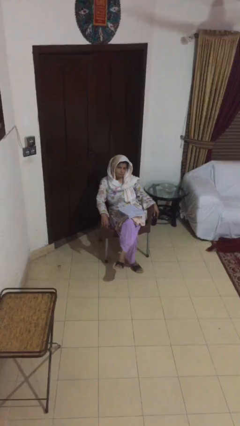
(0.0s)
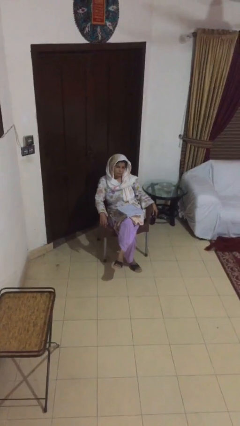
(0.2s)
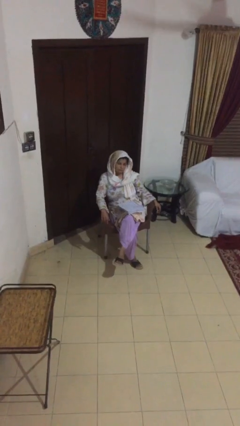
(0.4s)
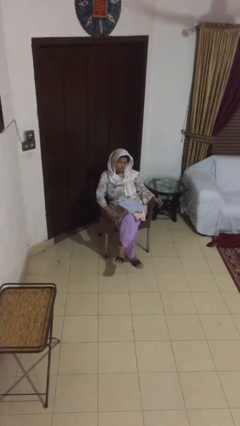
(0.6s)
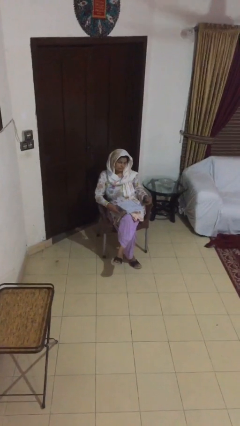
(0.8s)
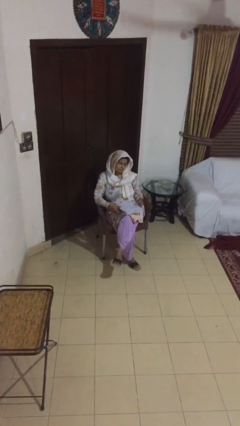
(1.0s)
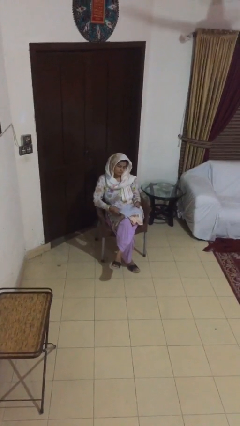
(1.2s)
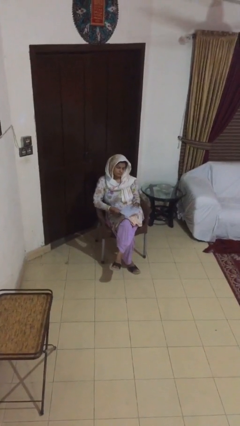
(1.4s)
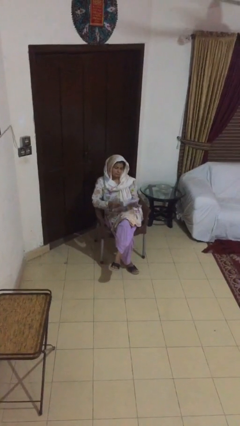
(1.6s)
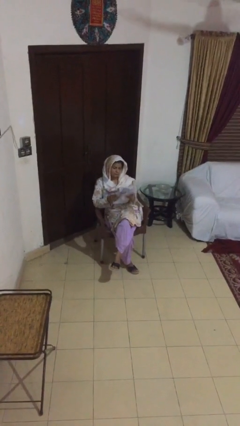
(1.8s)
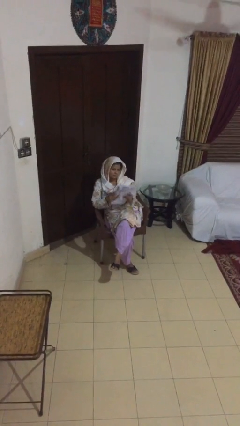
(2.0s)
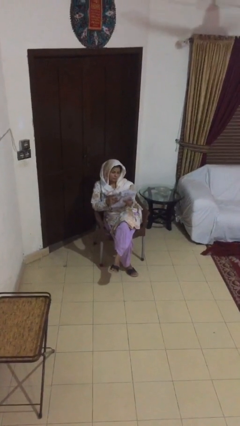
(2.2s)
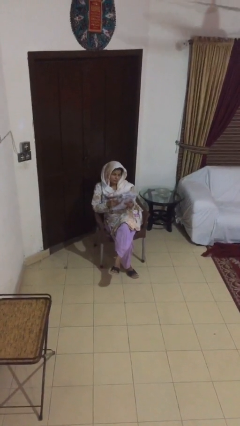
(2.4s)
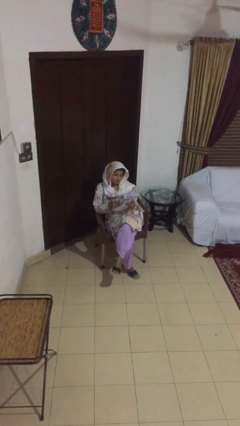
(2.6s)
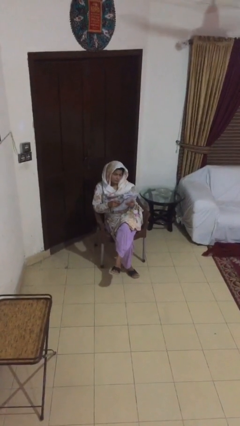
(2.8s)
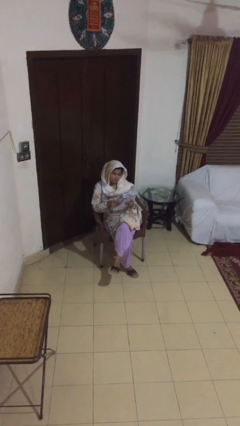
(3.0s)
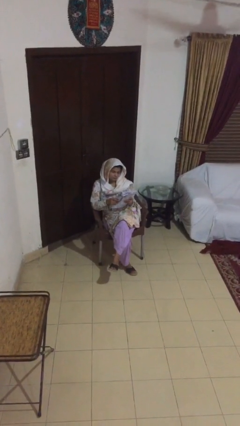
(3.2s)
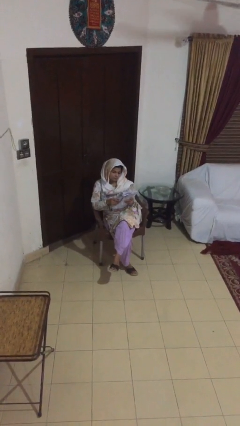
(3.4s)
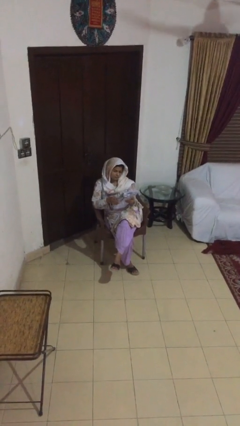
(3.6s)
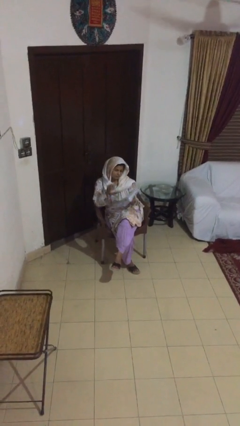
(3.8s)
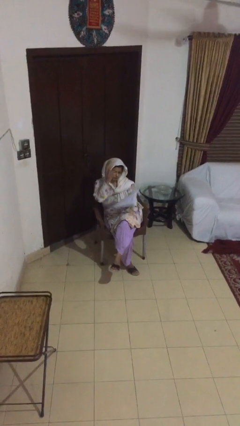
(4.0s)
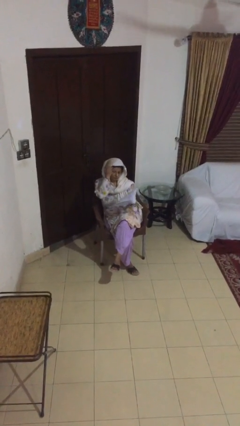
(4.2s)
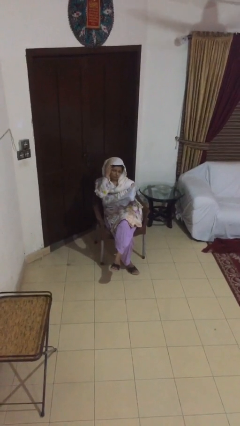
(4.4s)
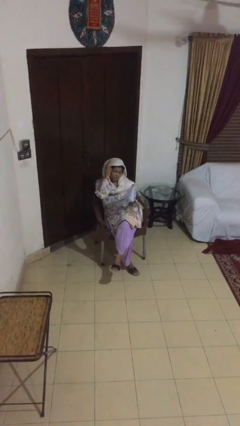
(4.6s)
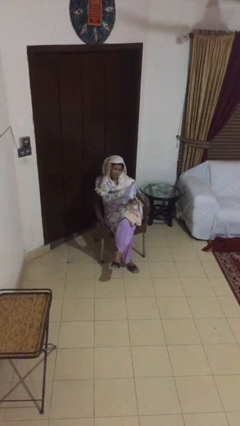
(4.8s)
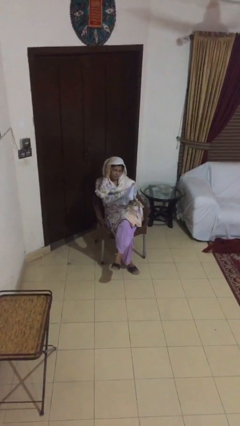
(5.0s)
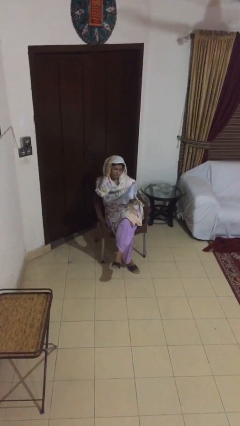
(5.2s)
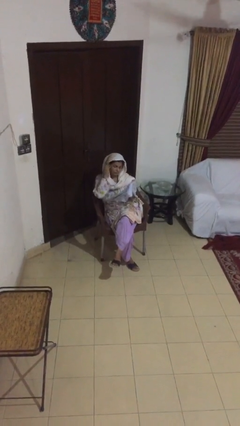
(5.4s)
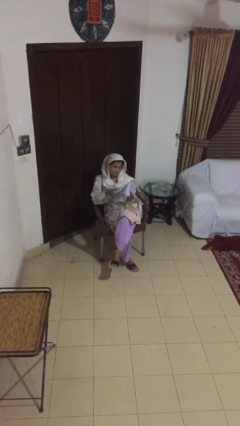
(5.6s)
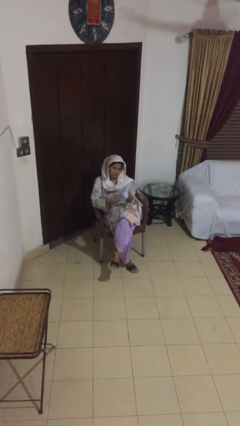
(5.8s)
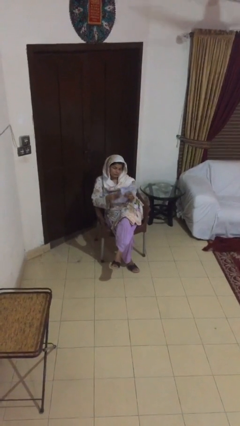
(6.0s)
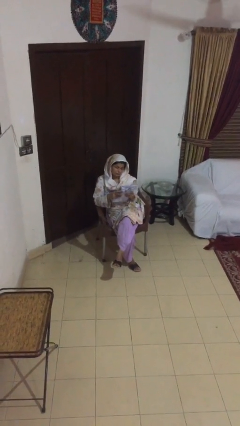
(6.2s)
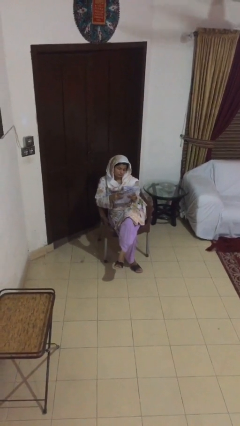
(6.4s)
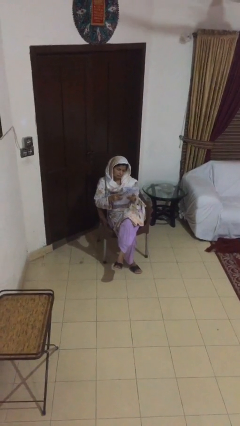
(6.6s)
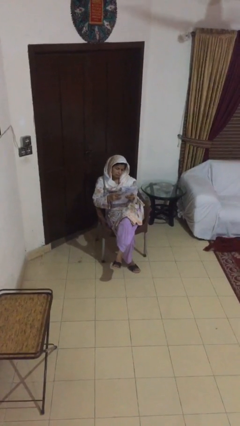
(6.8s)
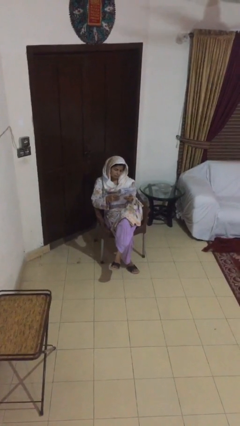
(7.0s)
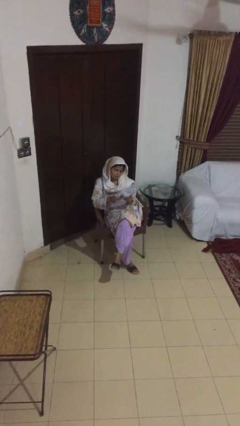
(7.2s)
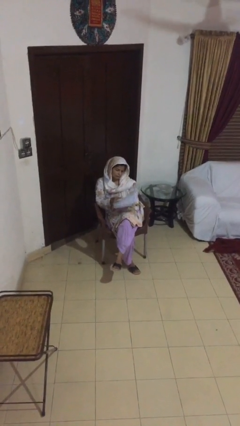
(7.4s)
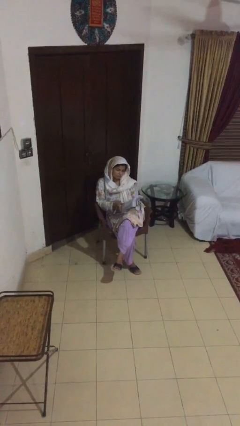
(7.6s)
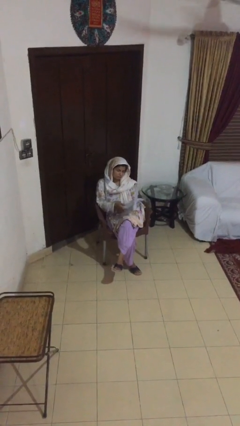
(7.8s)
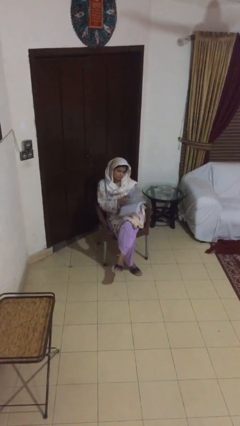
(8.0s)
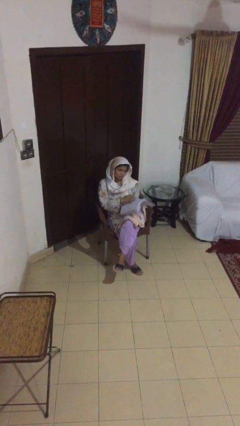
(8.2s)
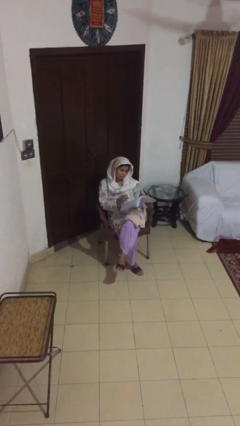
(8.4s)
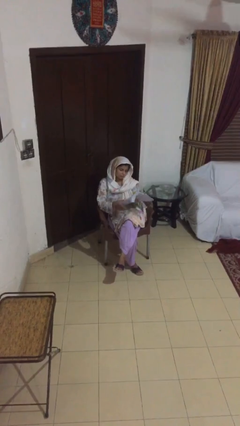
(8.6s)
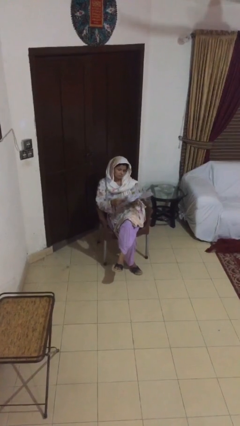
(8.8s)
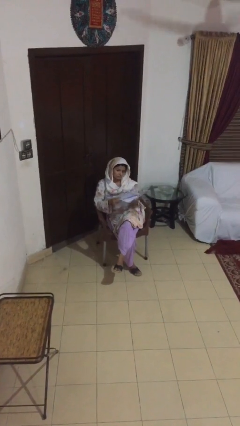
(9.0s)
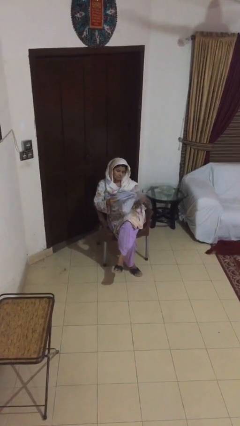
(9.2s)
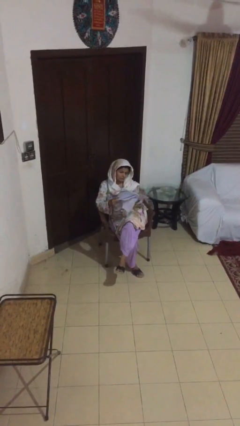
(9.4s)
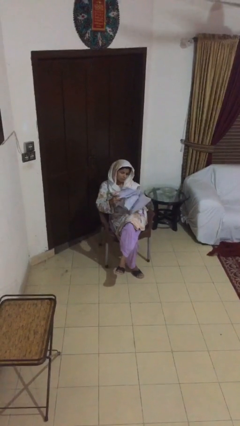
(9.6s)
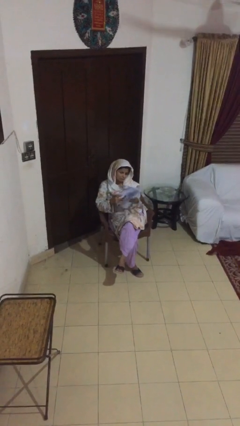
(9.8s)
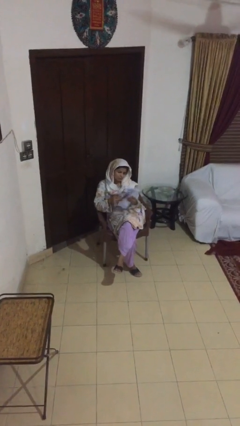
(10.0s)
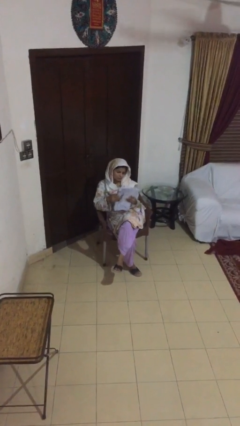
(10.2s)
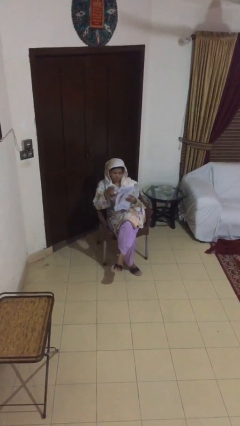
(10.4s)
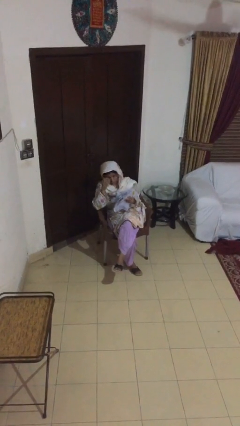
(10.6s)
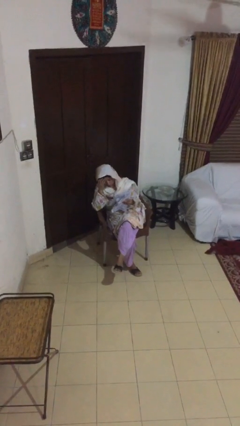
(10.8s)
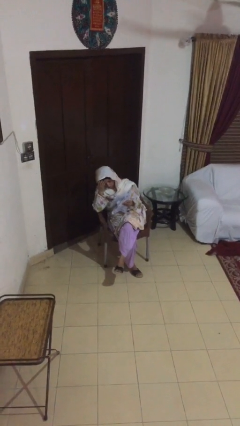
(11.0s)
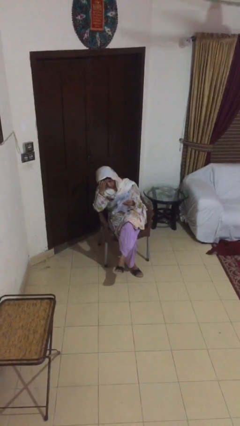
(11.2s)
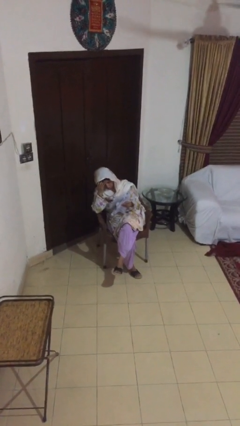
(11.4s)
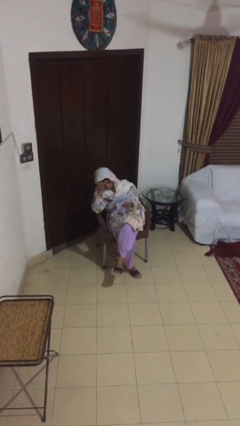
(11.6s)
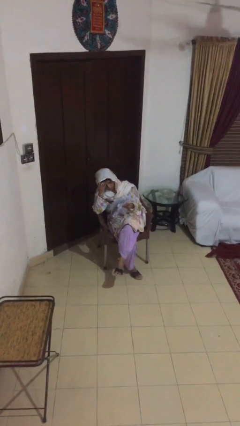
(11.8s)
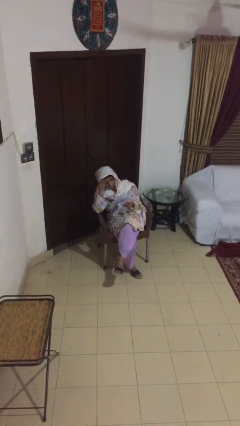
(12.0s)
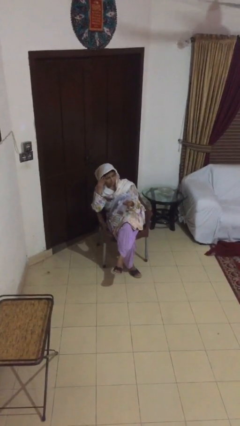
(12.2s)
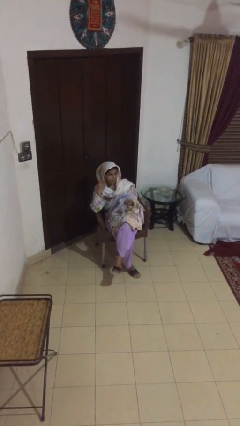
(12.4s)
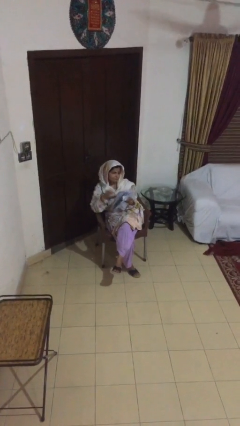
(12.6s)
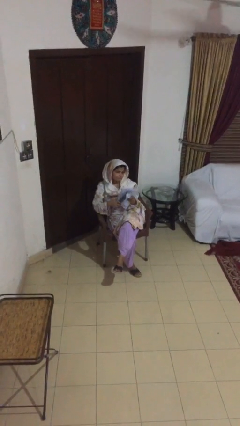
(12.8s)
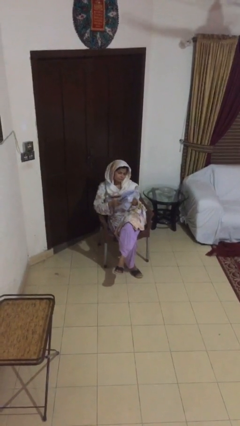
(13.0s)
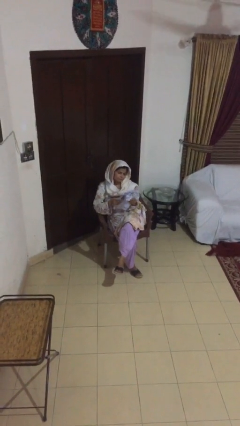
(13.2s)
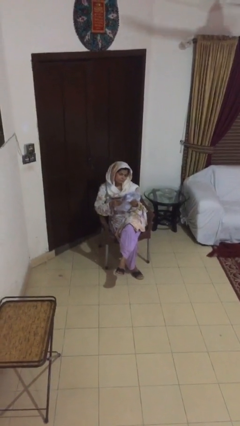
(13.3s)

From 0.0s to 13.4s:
person reads document

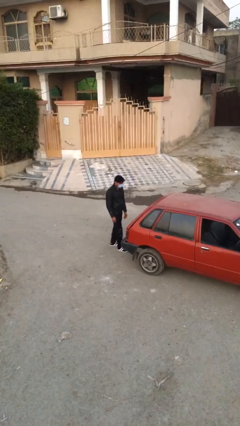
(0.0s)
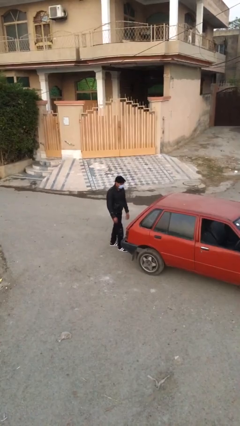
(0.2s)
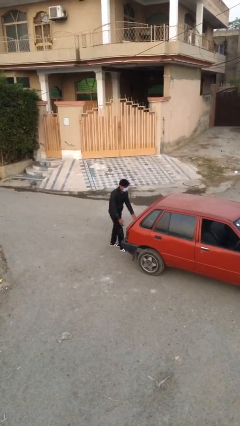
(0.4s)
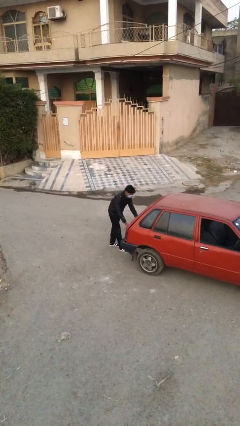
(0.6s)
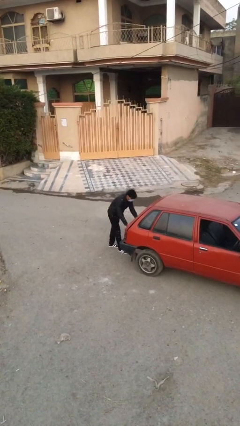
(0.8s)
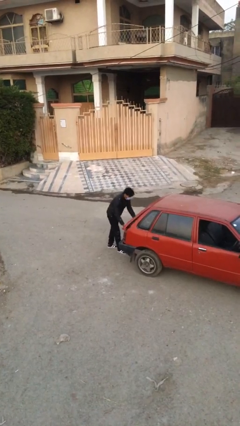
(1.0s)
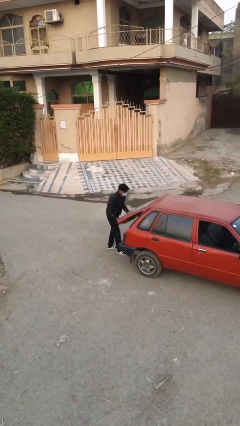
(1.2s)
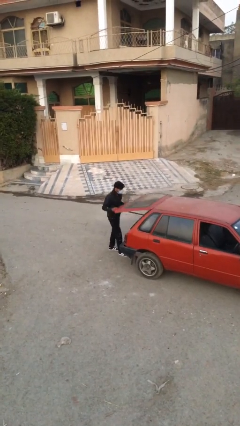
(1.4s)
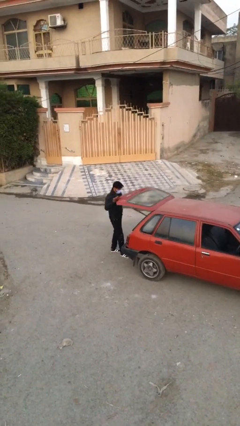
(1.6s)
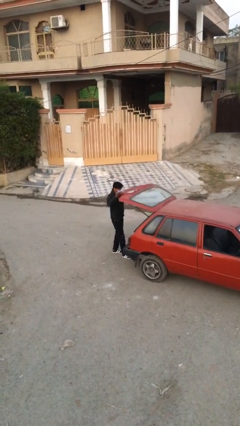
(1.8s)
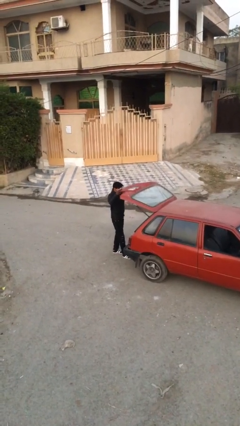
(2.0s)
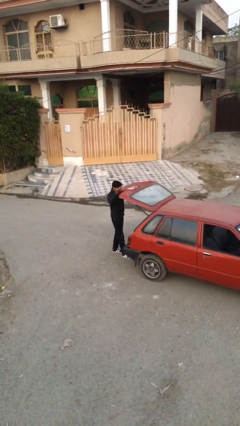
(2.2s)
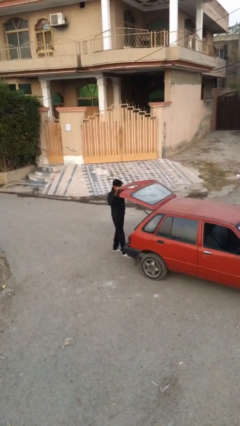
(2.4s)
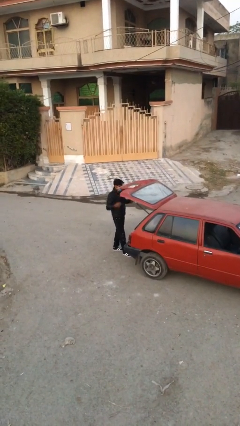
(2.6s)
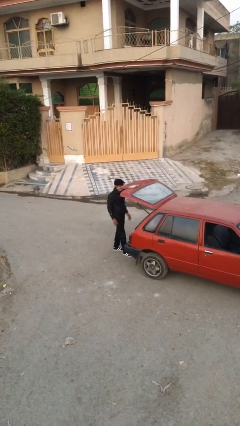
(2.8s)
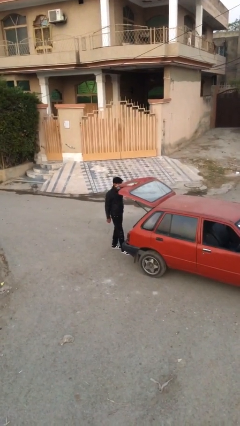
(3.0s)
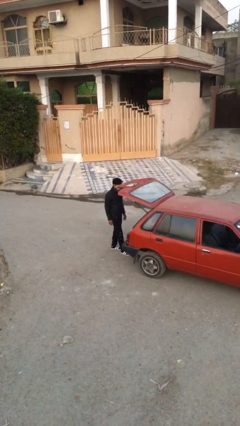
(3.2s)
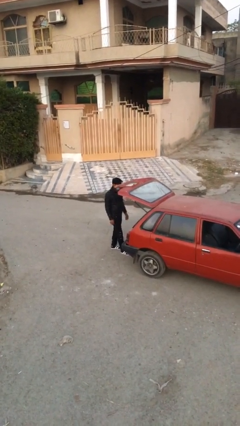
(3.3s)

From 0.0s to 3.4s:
person opens car trunk

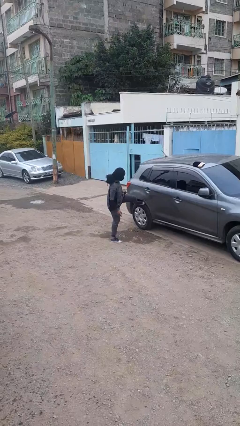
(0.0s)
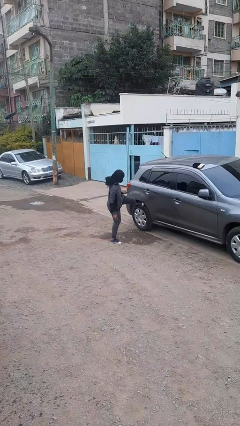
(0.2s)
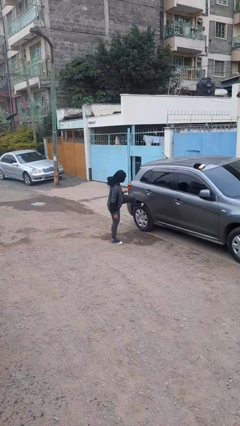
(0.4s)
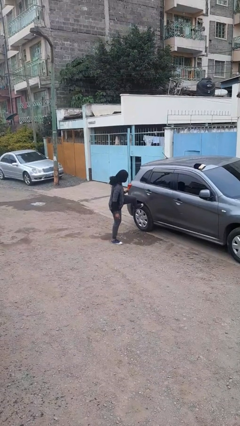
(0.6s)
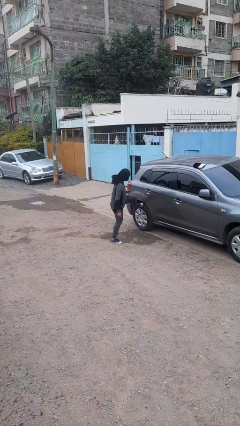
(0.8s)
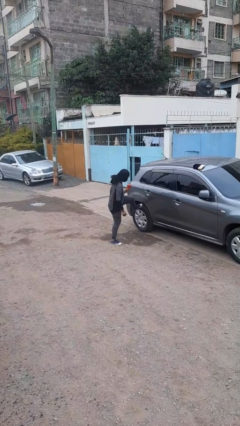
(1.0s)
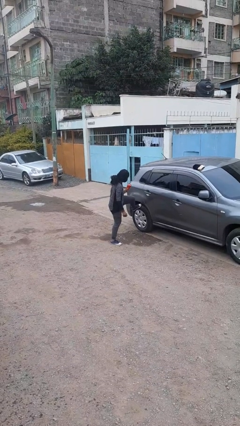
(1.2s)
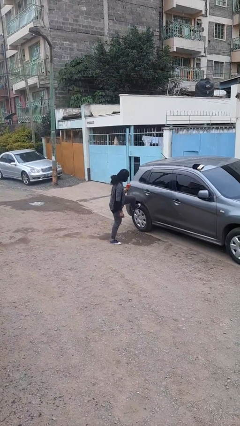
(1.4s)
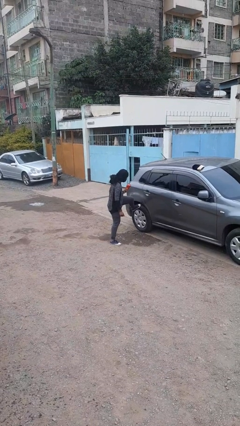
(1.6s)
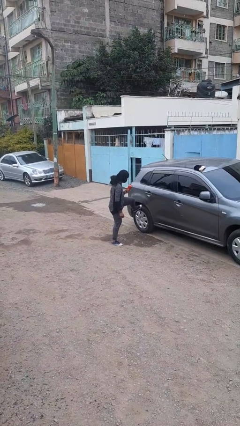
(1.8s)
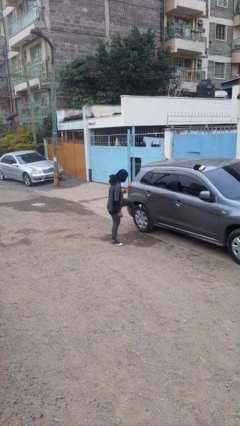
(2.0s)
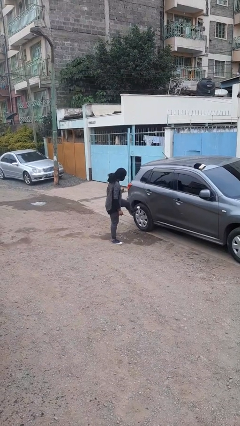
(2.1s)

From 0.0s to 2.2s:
person kicks car tires
